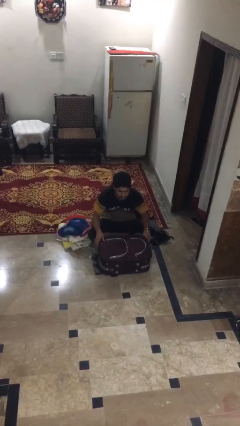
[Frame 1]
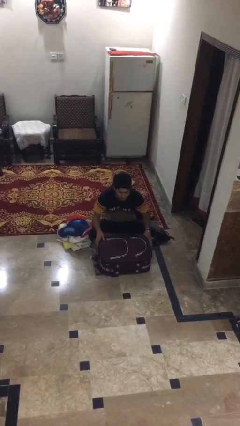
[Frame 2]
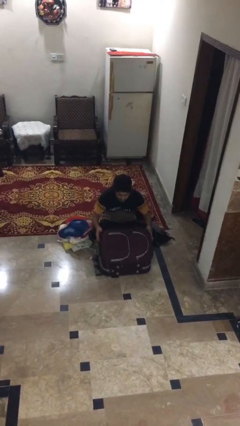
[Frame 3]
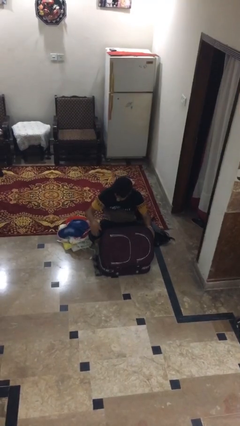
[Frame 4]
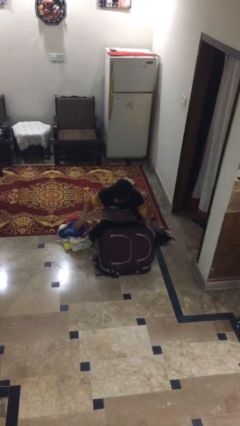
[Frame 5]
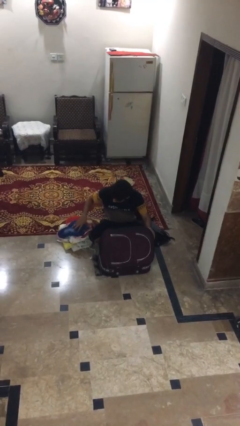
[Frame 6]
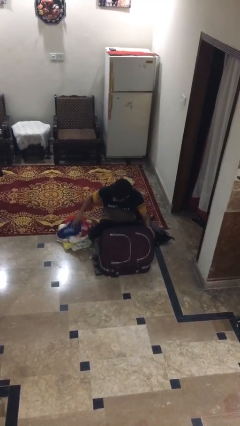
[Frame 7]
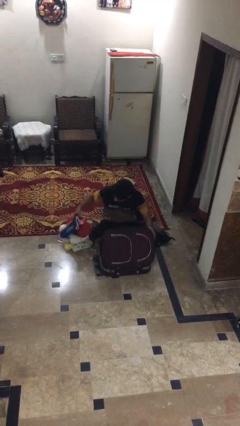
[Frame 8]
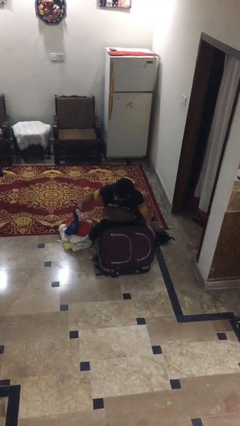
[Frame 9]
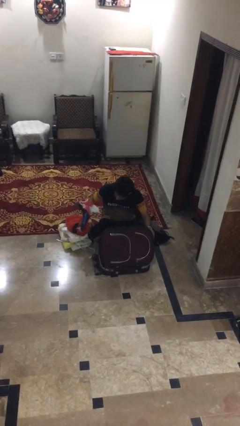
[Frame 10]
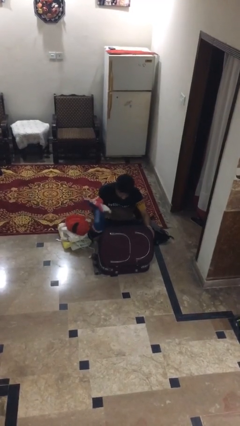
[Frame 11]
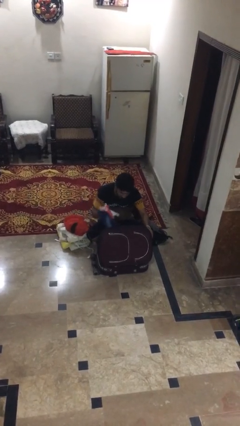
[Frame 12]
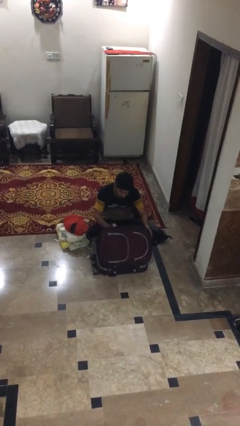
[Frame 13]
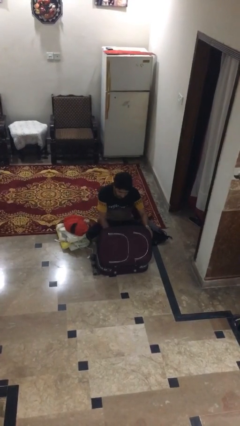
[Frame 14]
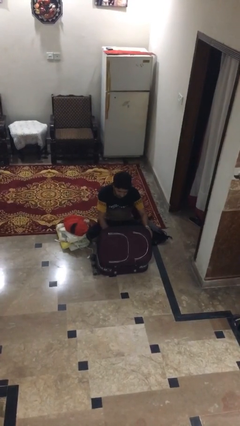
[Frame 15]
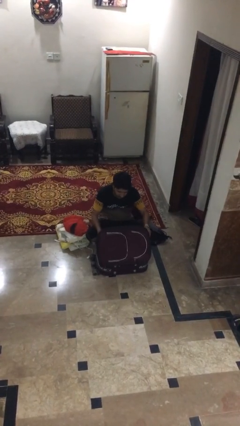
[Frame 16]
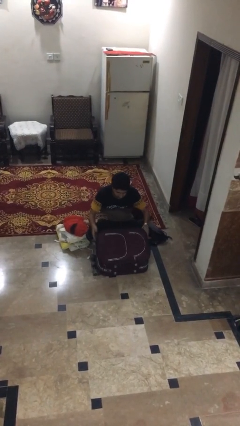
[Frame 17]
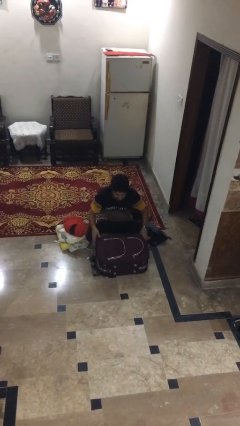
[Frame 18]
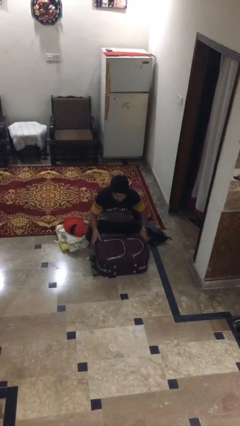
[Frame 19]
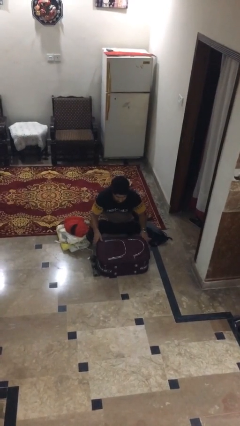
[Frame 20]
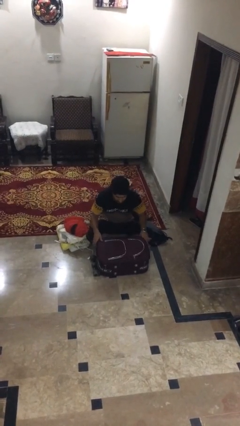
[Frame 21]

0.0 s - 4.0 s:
person loads clothes into suitcase

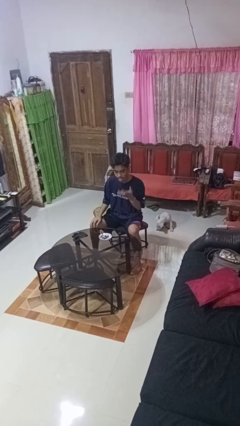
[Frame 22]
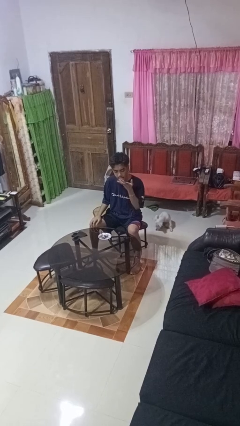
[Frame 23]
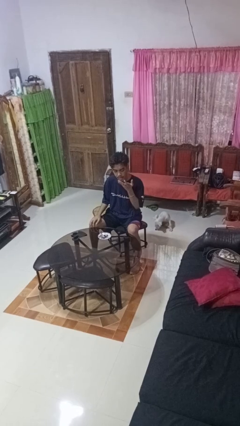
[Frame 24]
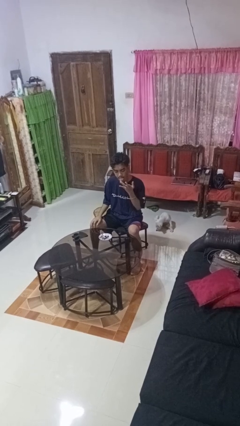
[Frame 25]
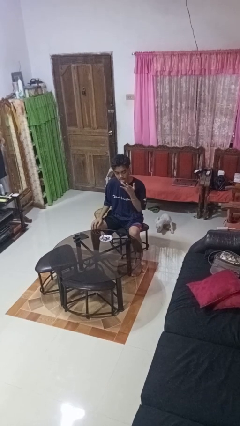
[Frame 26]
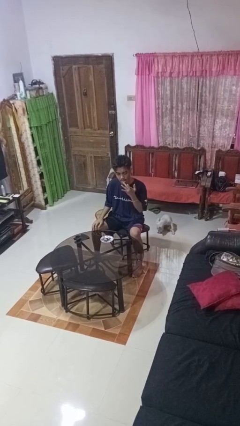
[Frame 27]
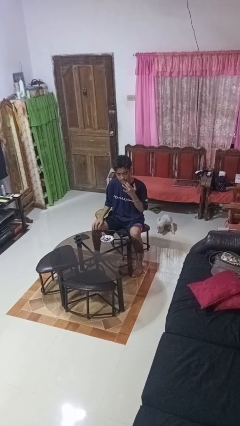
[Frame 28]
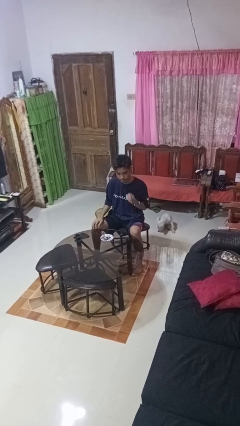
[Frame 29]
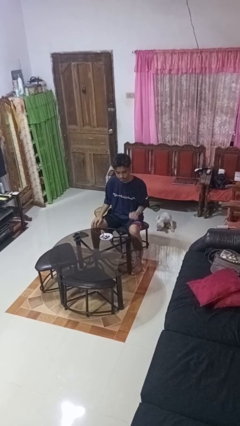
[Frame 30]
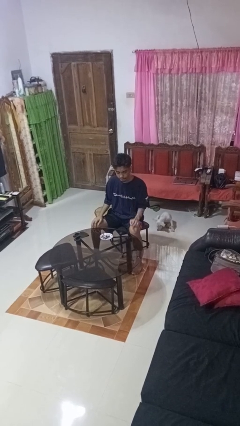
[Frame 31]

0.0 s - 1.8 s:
person licks fingers

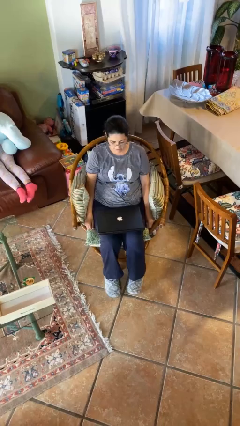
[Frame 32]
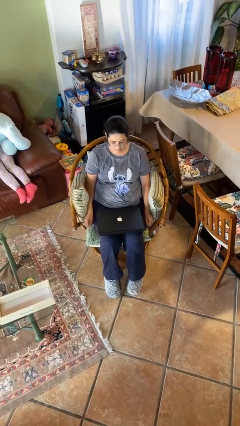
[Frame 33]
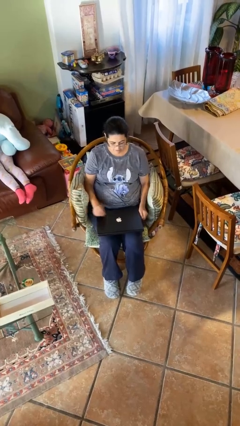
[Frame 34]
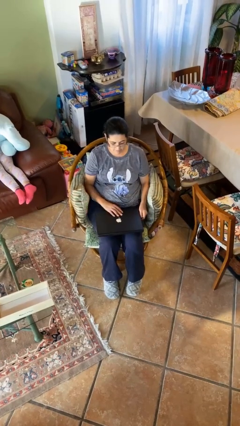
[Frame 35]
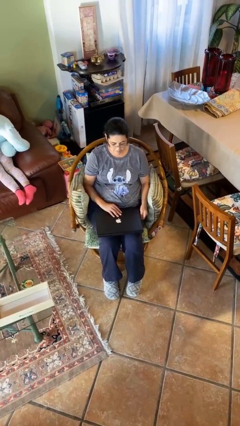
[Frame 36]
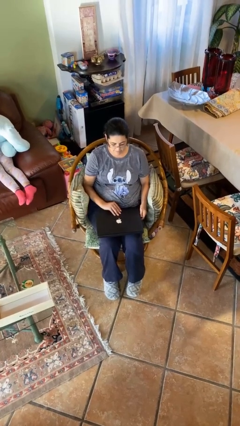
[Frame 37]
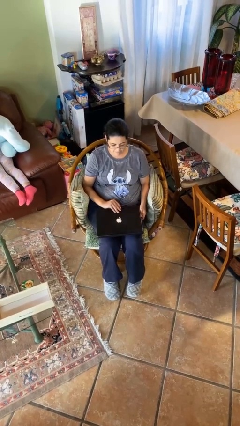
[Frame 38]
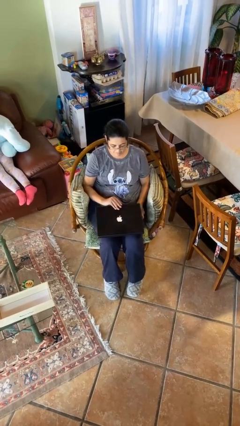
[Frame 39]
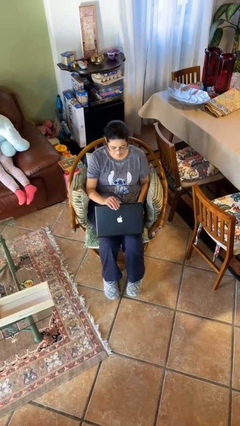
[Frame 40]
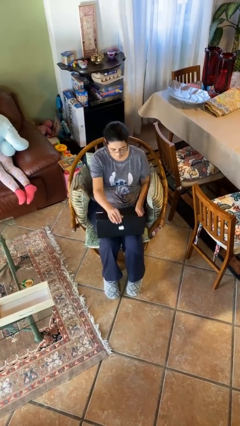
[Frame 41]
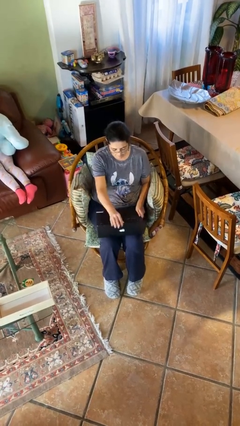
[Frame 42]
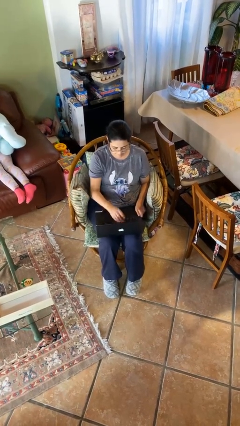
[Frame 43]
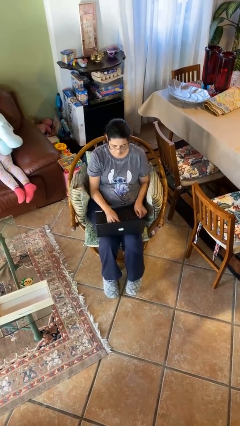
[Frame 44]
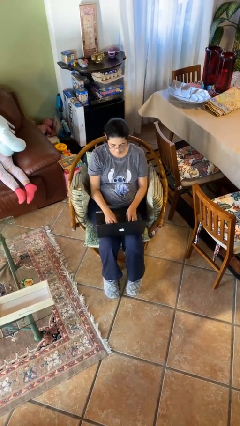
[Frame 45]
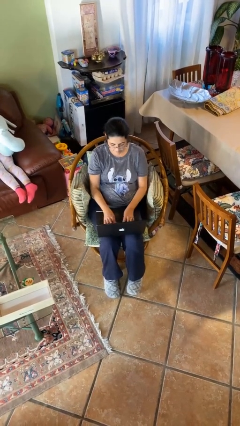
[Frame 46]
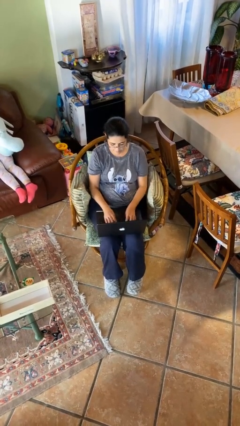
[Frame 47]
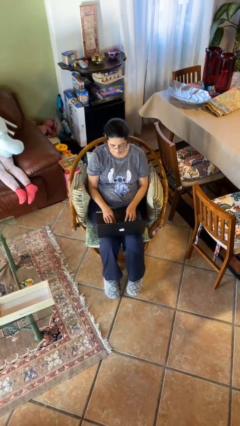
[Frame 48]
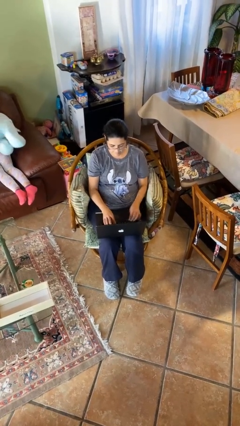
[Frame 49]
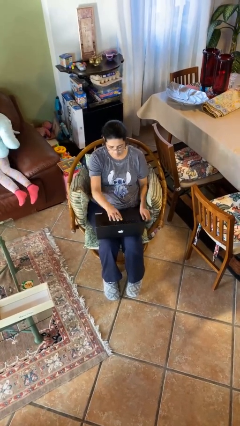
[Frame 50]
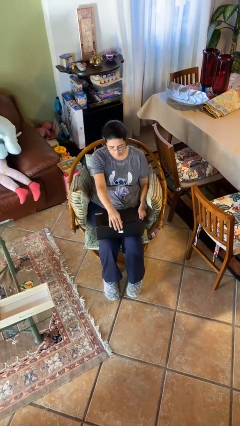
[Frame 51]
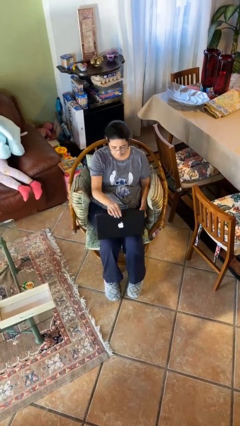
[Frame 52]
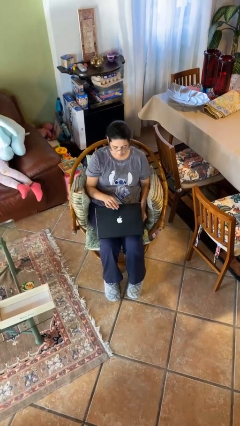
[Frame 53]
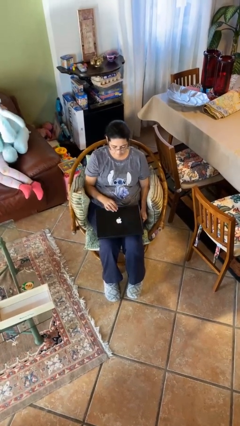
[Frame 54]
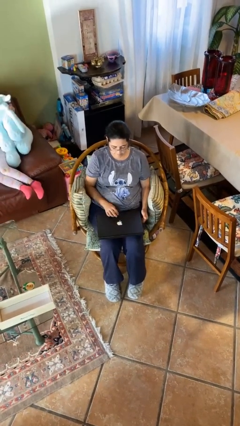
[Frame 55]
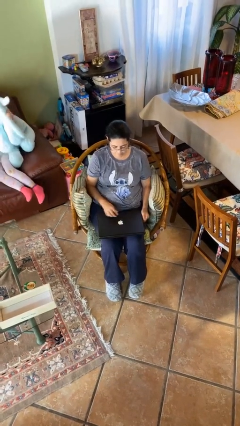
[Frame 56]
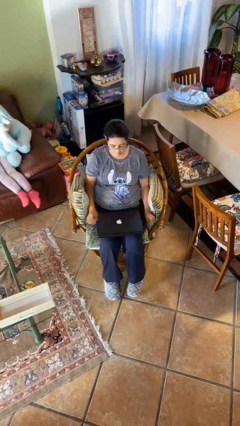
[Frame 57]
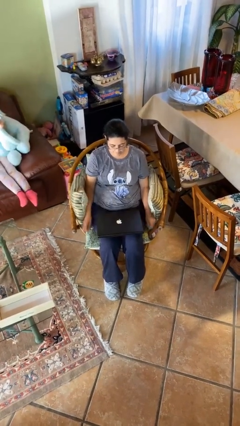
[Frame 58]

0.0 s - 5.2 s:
person interacts with laptop

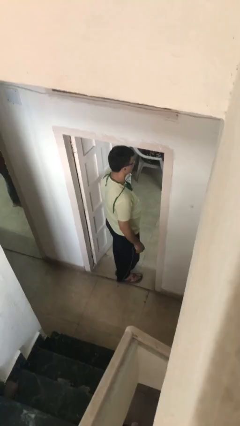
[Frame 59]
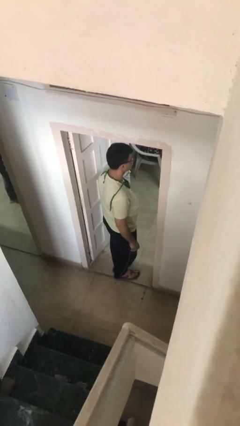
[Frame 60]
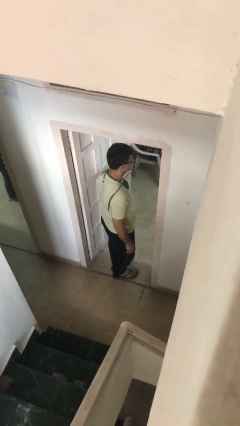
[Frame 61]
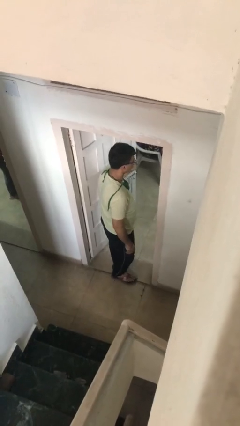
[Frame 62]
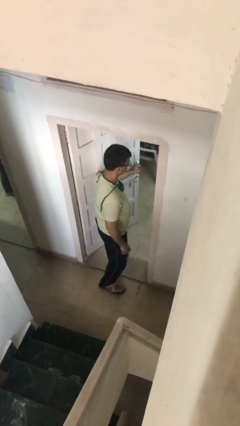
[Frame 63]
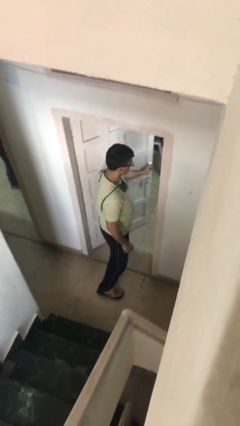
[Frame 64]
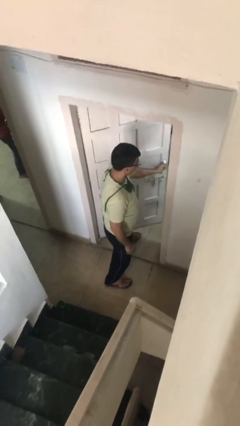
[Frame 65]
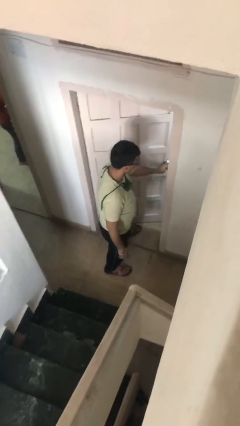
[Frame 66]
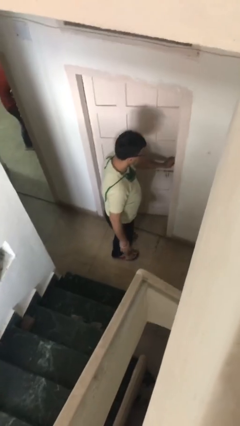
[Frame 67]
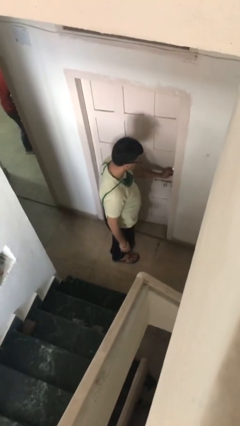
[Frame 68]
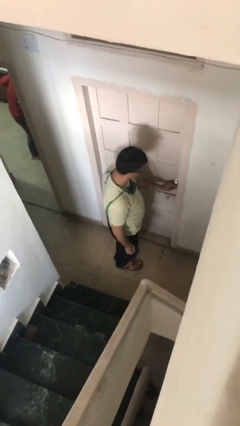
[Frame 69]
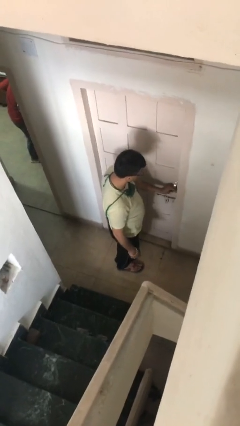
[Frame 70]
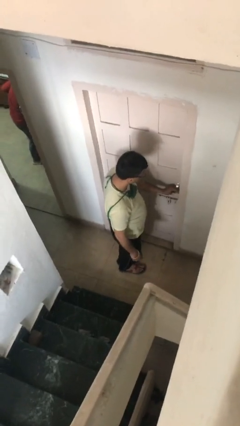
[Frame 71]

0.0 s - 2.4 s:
person closes facility door

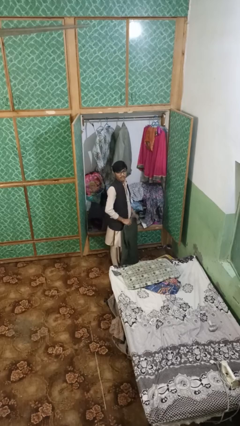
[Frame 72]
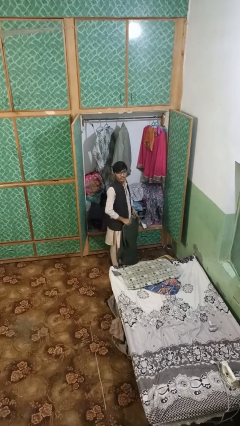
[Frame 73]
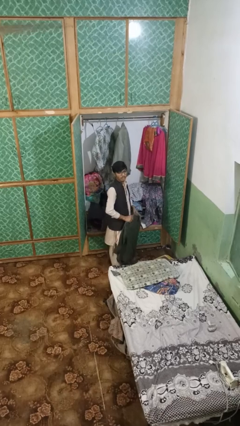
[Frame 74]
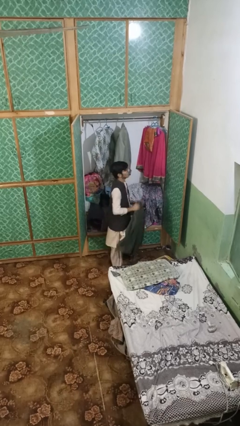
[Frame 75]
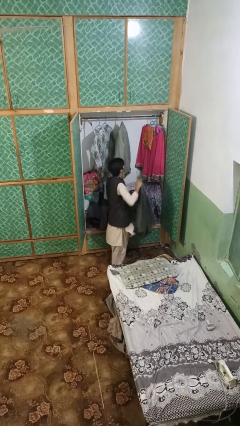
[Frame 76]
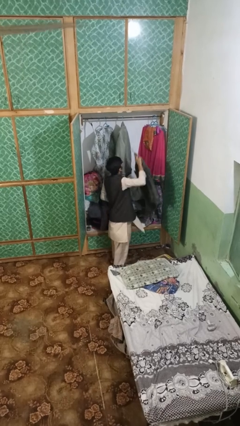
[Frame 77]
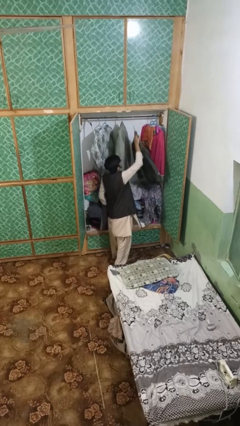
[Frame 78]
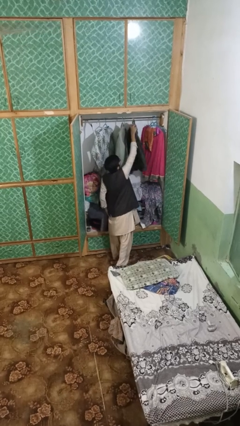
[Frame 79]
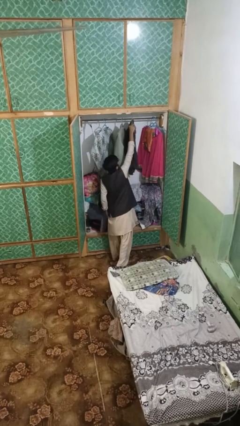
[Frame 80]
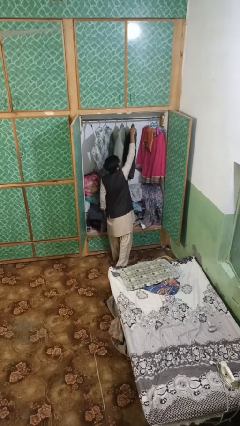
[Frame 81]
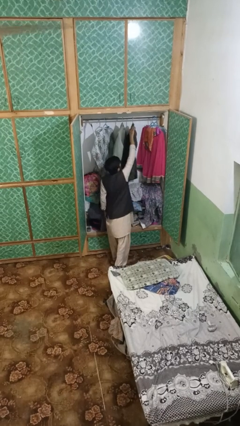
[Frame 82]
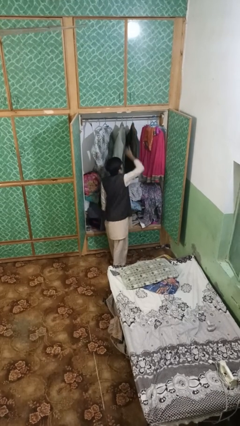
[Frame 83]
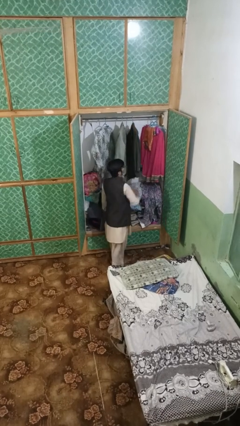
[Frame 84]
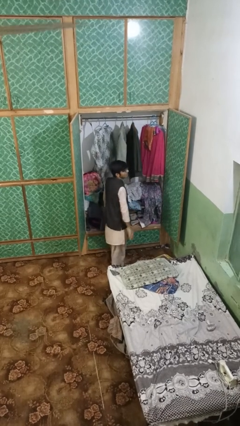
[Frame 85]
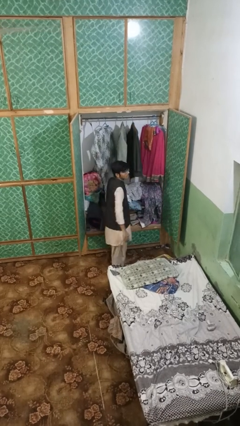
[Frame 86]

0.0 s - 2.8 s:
person puts clothes into closet

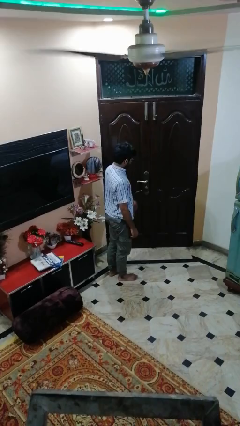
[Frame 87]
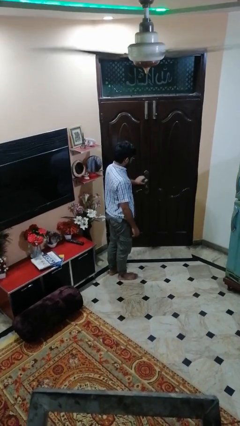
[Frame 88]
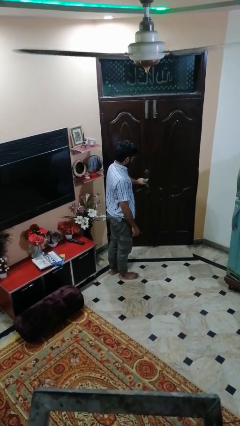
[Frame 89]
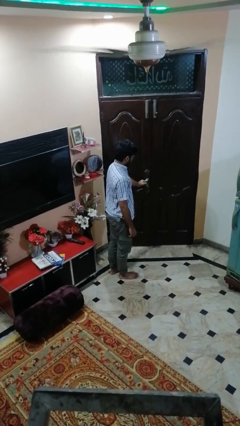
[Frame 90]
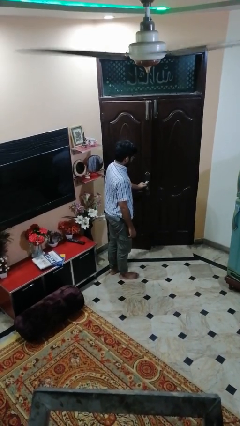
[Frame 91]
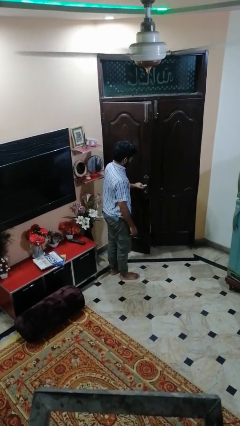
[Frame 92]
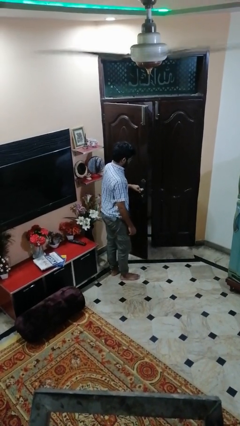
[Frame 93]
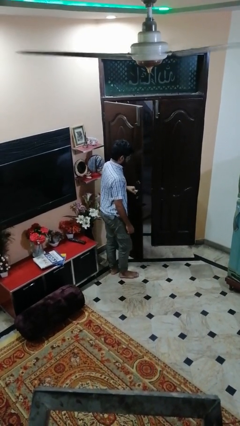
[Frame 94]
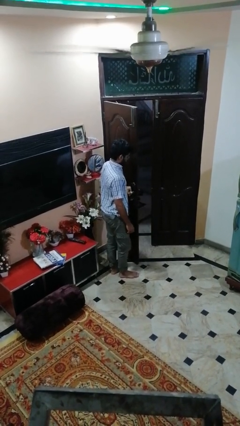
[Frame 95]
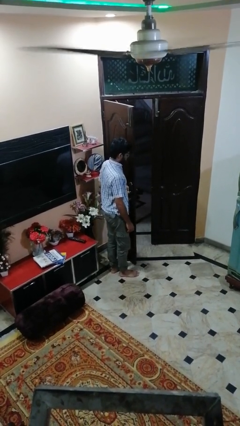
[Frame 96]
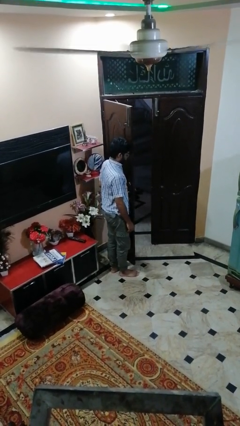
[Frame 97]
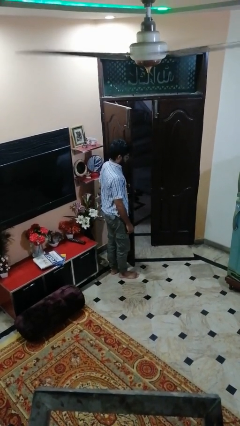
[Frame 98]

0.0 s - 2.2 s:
person opens facility door
